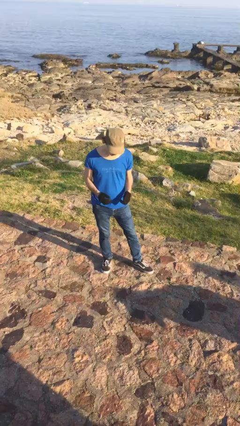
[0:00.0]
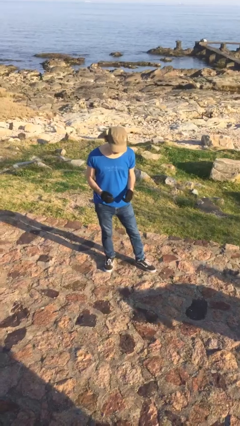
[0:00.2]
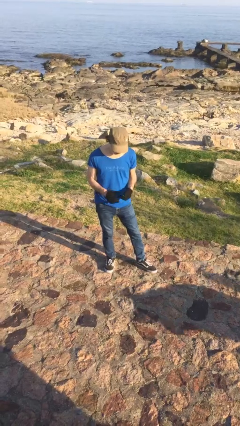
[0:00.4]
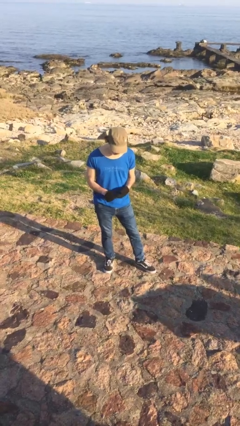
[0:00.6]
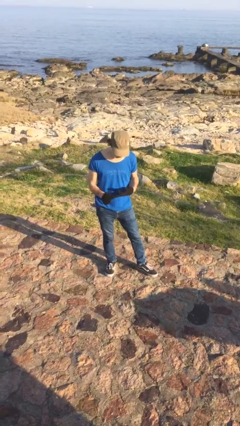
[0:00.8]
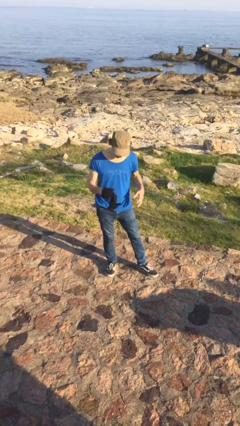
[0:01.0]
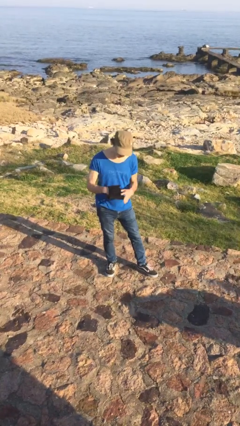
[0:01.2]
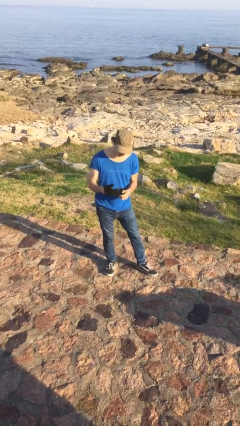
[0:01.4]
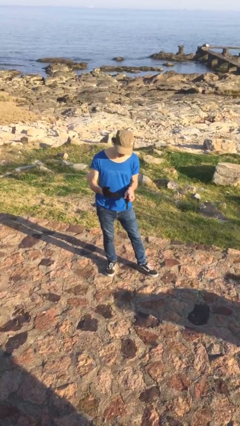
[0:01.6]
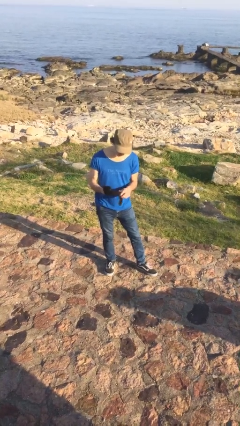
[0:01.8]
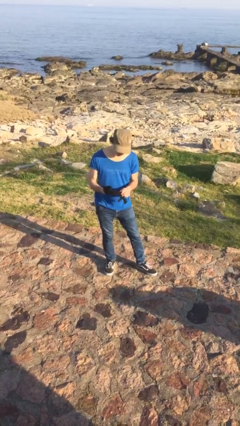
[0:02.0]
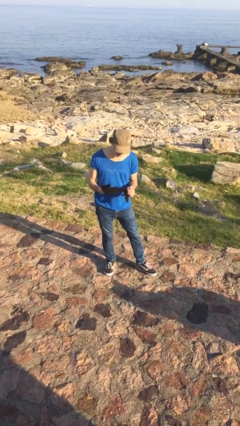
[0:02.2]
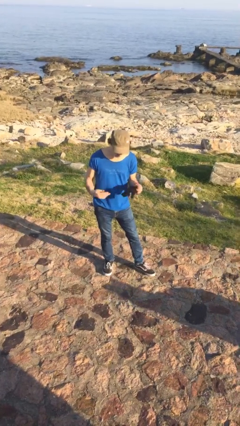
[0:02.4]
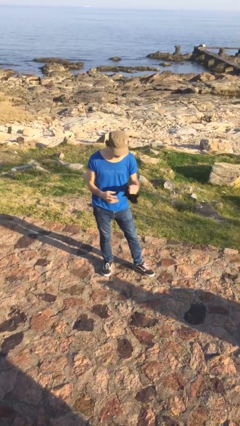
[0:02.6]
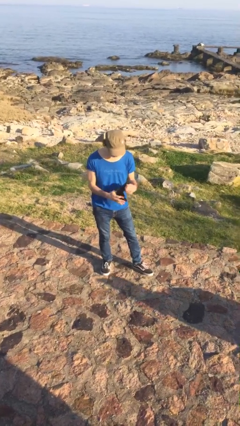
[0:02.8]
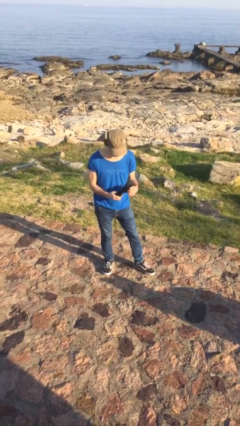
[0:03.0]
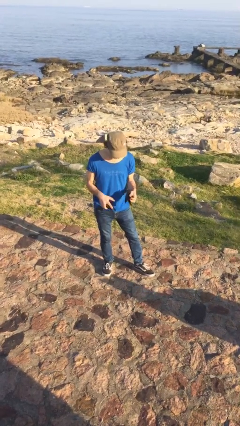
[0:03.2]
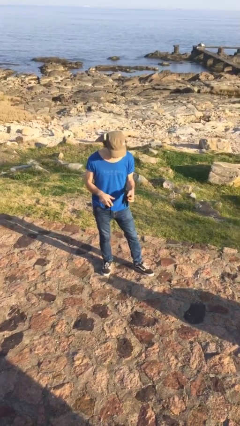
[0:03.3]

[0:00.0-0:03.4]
person takes off gloves

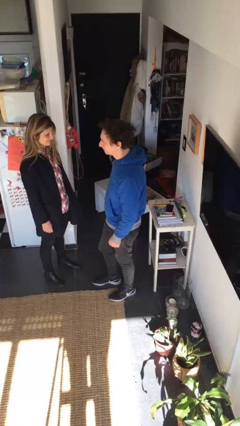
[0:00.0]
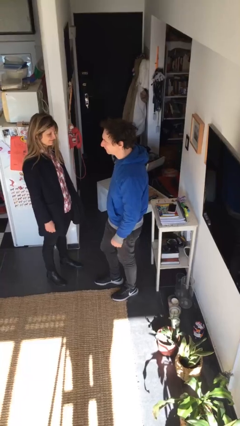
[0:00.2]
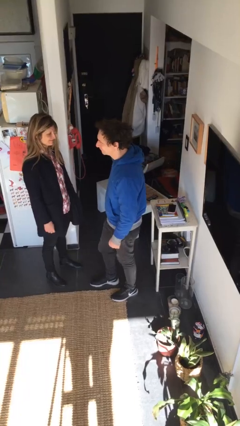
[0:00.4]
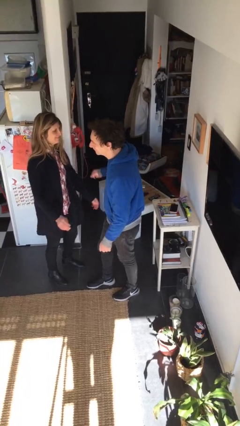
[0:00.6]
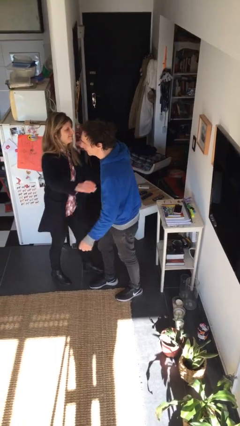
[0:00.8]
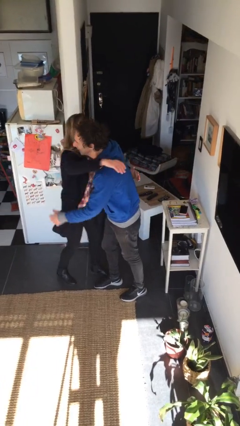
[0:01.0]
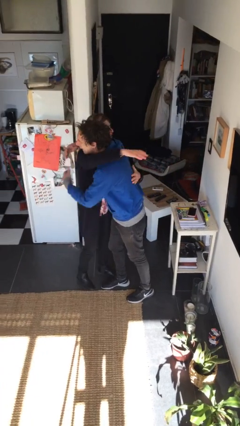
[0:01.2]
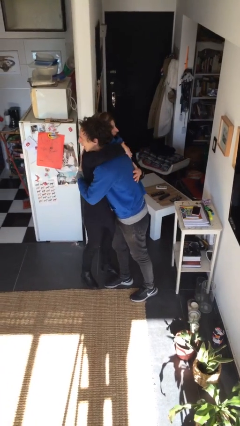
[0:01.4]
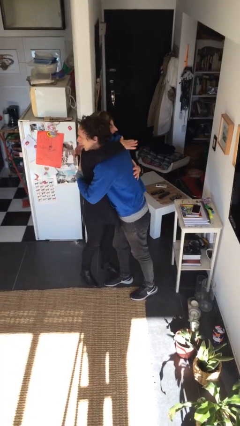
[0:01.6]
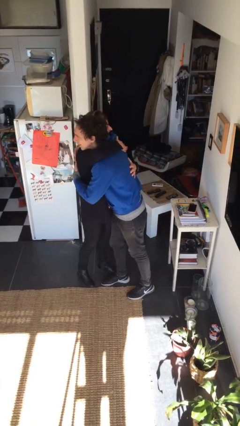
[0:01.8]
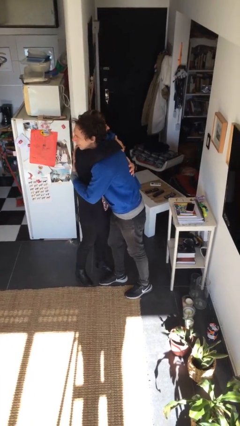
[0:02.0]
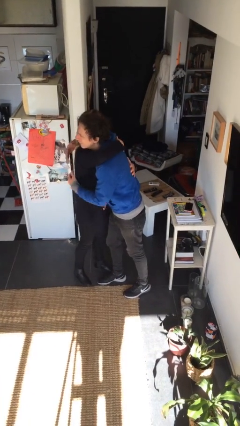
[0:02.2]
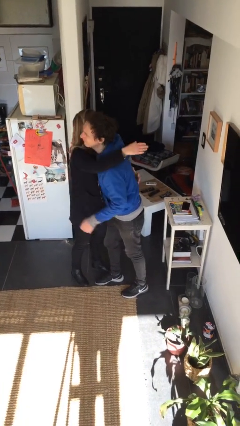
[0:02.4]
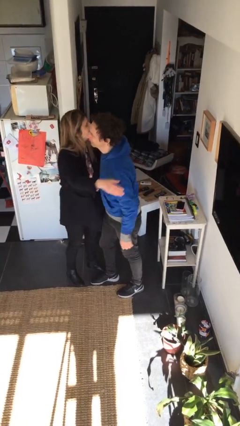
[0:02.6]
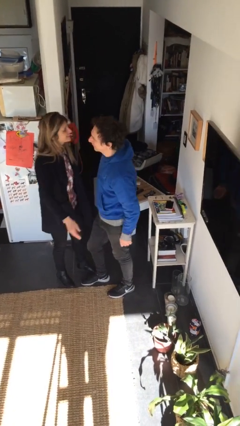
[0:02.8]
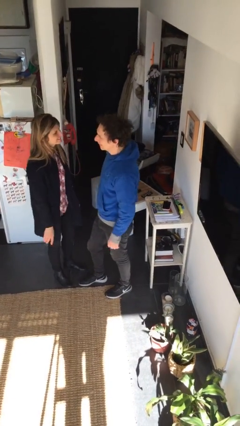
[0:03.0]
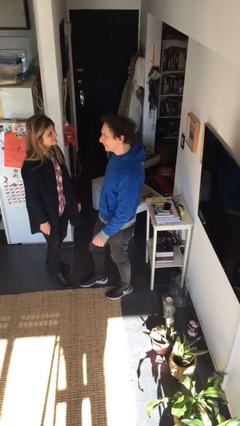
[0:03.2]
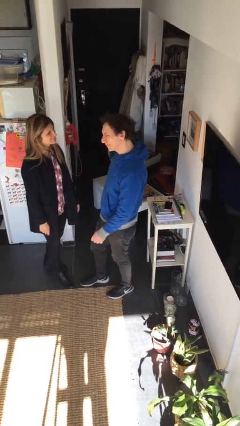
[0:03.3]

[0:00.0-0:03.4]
person embraces person

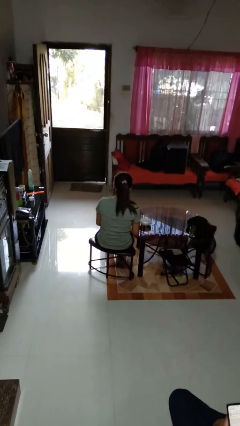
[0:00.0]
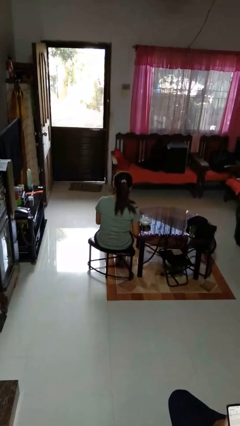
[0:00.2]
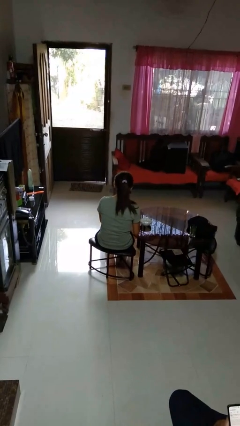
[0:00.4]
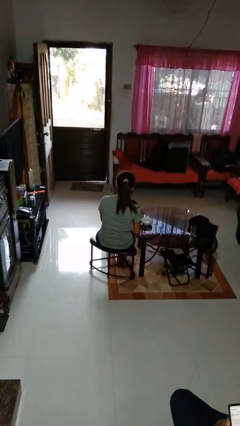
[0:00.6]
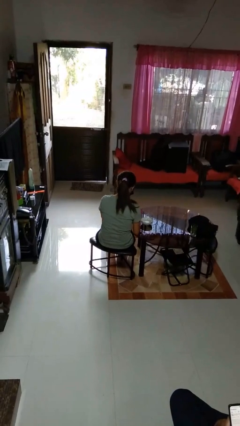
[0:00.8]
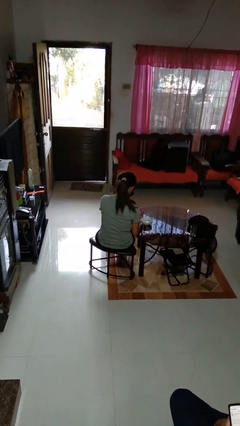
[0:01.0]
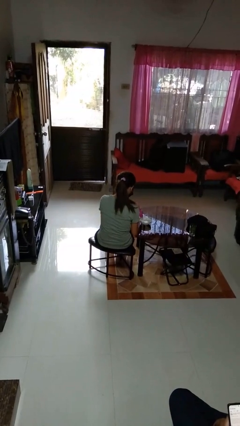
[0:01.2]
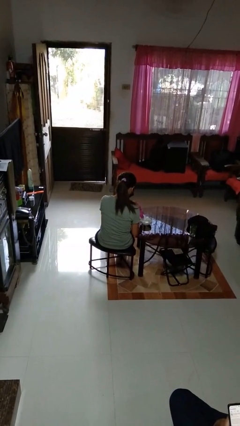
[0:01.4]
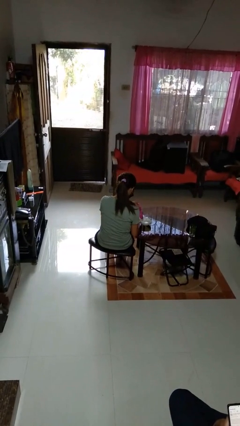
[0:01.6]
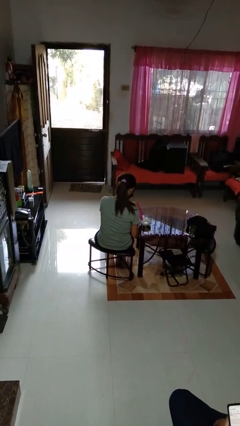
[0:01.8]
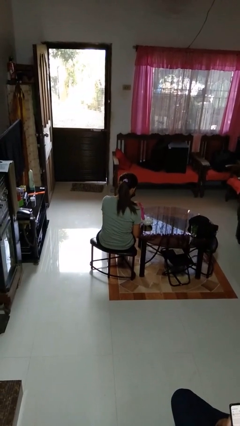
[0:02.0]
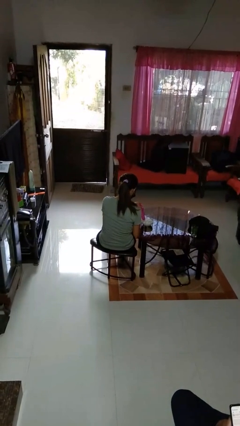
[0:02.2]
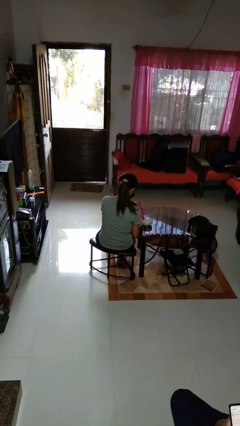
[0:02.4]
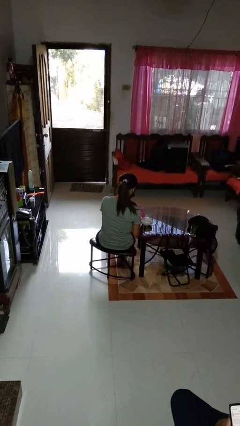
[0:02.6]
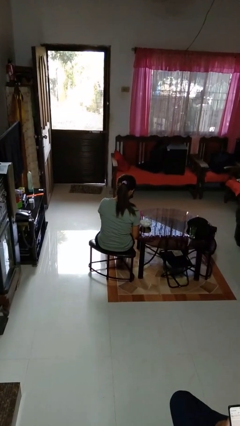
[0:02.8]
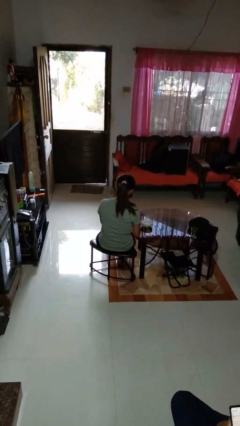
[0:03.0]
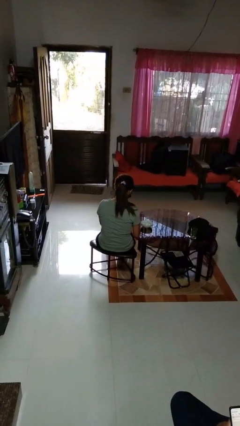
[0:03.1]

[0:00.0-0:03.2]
person pours into bowl

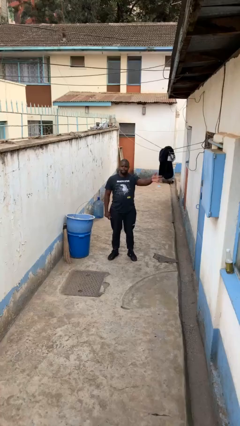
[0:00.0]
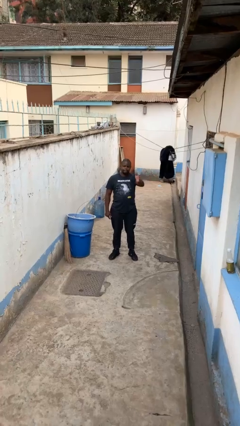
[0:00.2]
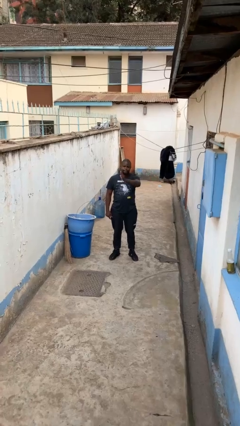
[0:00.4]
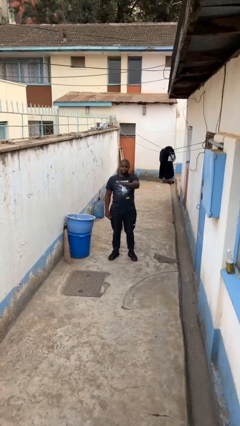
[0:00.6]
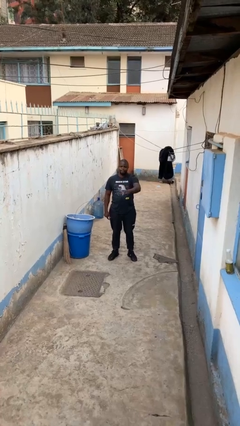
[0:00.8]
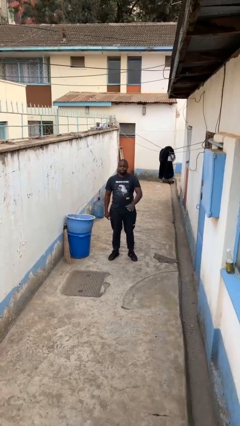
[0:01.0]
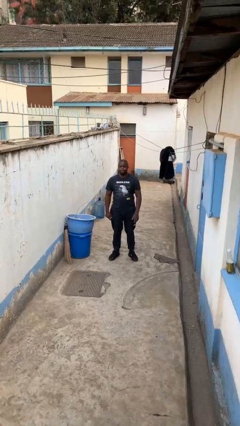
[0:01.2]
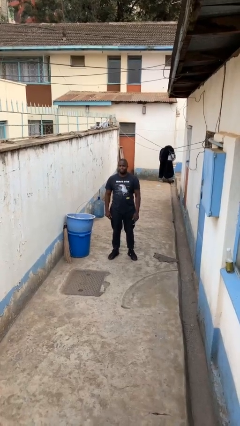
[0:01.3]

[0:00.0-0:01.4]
person gestures swipe right

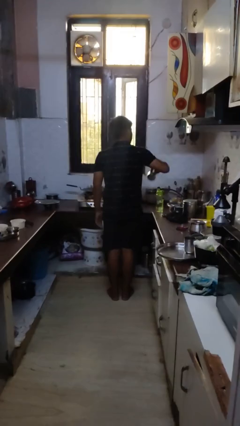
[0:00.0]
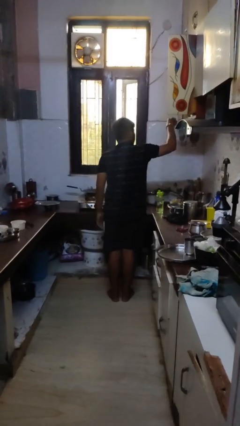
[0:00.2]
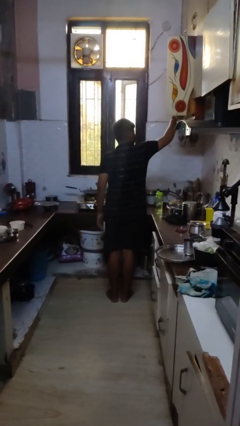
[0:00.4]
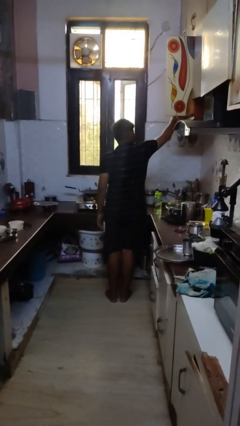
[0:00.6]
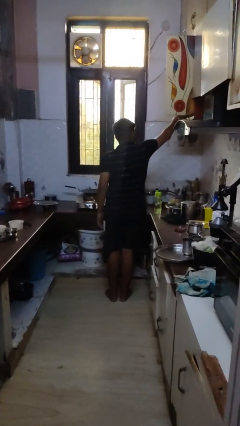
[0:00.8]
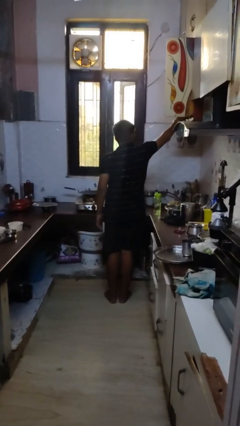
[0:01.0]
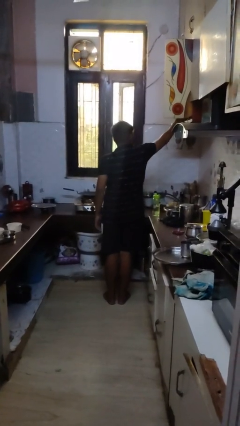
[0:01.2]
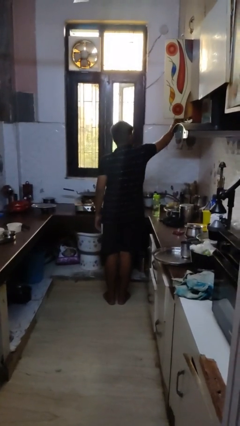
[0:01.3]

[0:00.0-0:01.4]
person puts object in cabinet

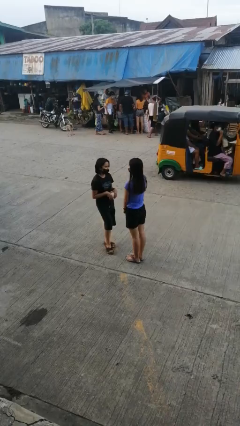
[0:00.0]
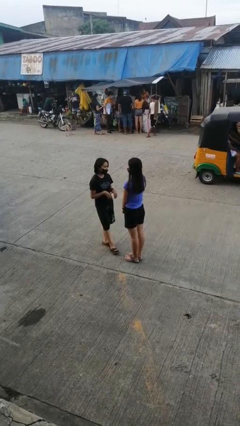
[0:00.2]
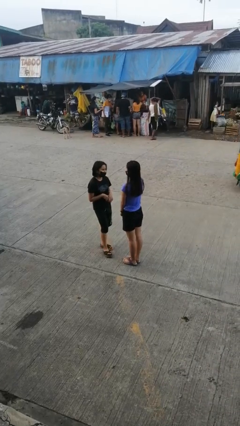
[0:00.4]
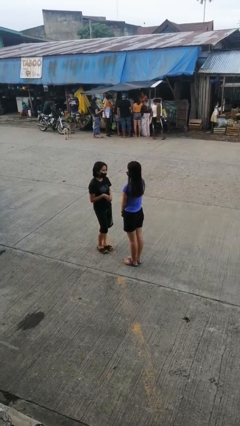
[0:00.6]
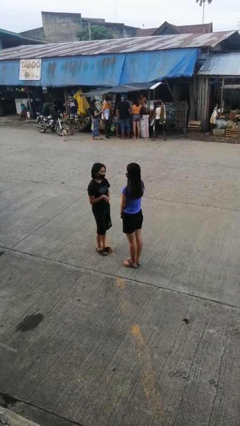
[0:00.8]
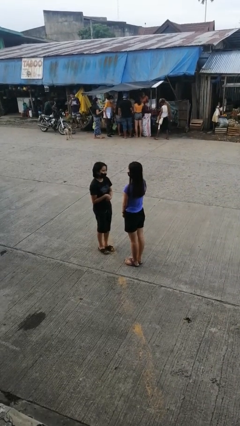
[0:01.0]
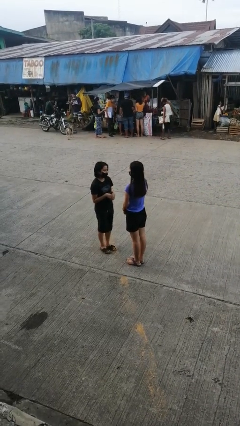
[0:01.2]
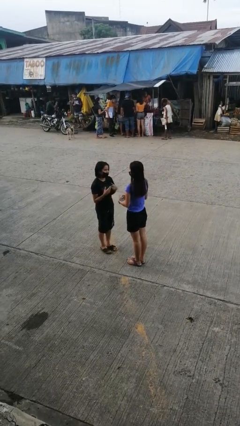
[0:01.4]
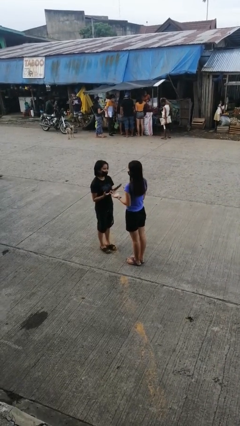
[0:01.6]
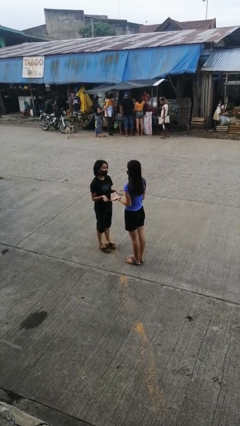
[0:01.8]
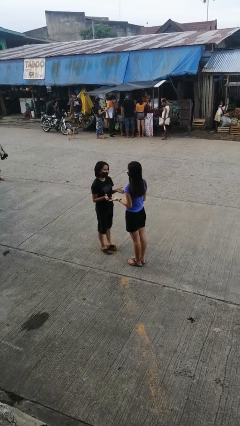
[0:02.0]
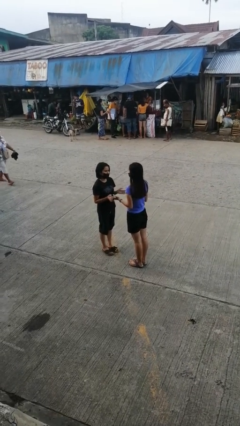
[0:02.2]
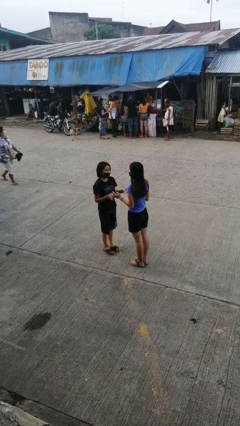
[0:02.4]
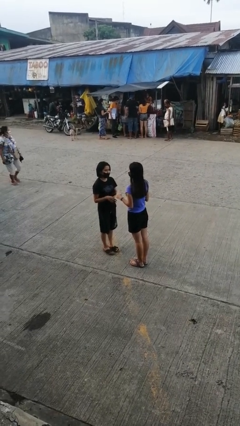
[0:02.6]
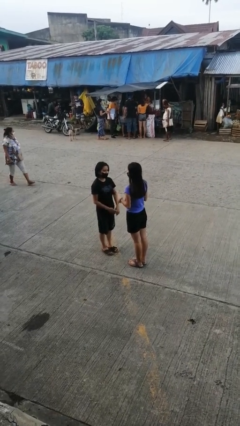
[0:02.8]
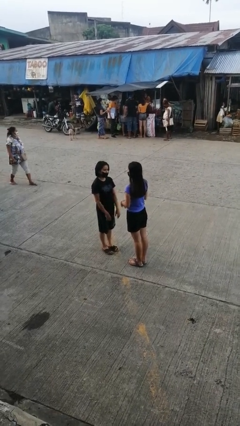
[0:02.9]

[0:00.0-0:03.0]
person talks to person

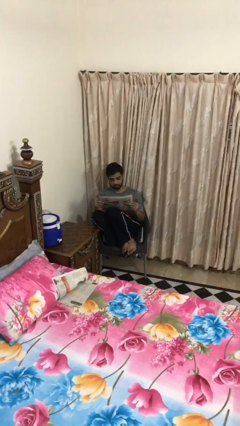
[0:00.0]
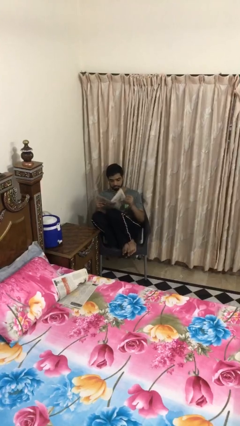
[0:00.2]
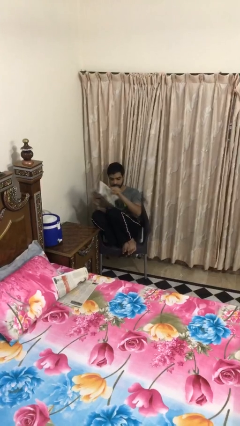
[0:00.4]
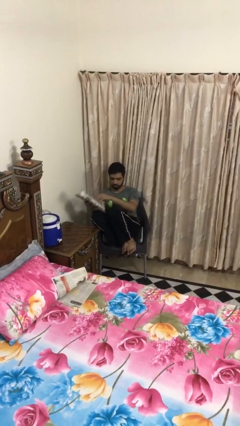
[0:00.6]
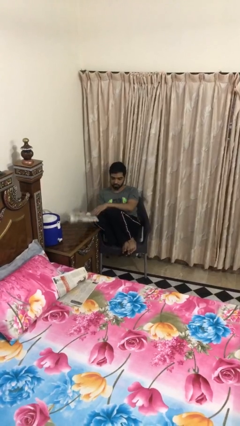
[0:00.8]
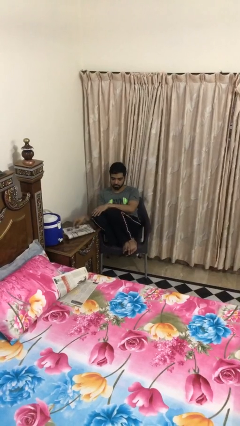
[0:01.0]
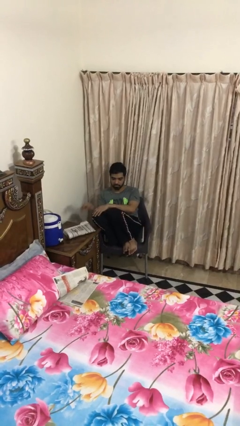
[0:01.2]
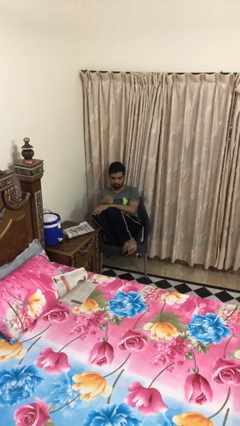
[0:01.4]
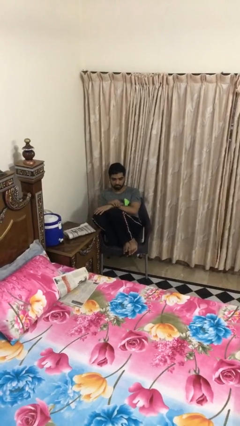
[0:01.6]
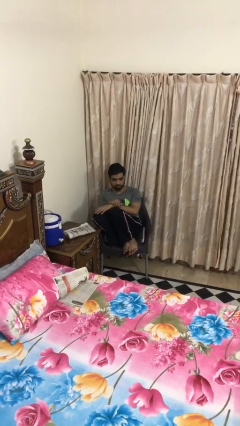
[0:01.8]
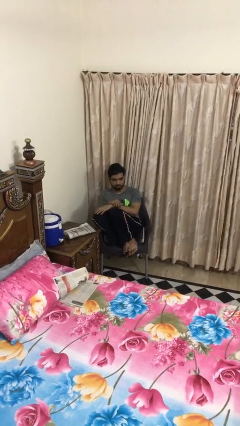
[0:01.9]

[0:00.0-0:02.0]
person puts down object on table
